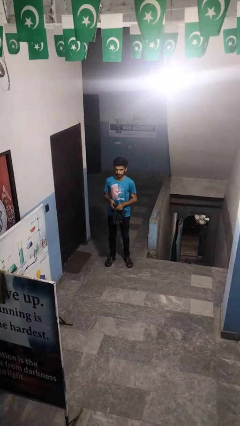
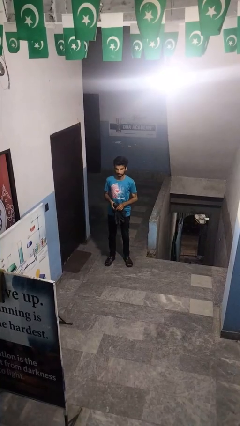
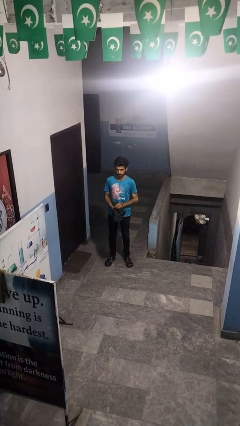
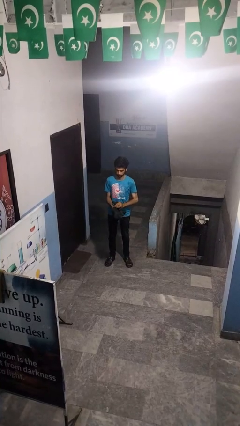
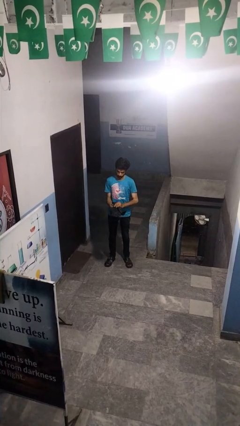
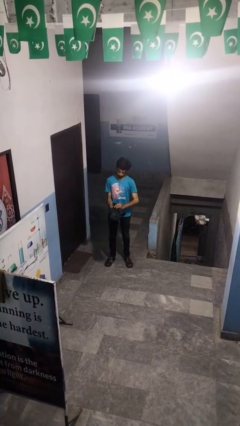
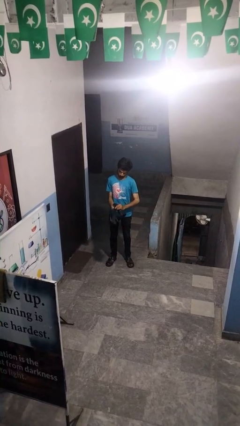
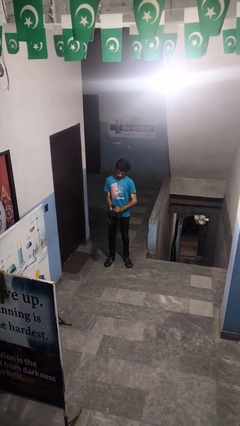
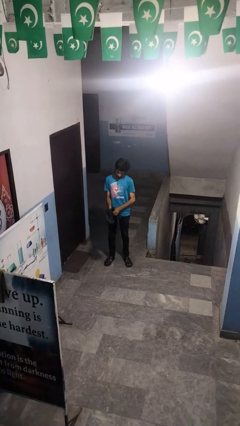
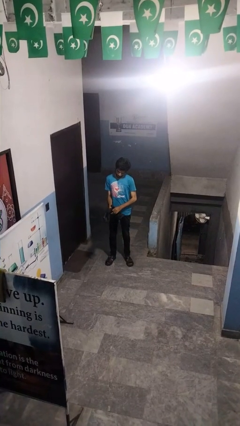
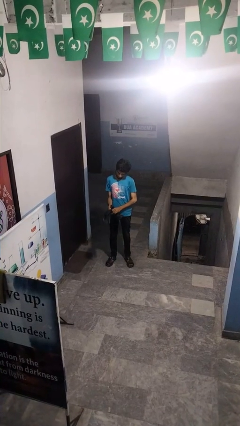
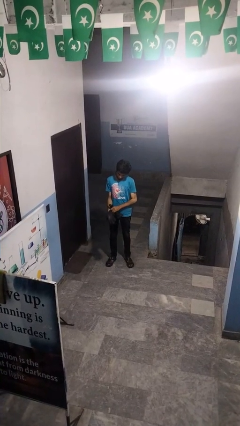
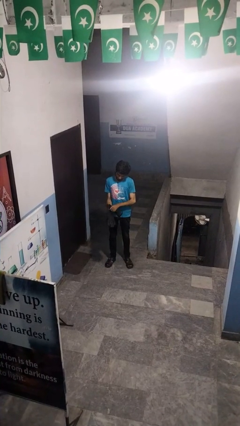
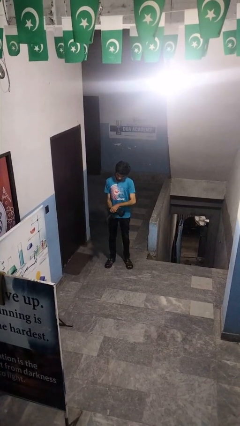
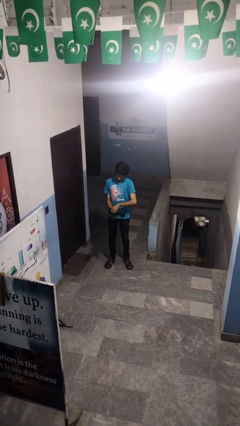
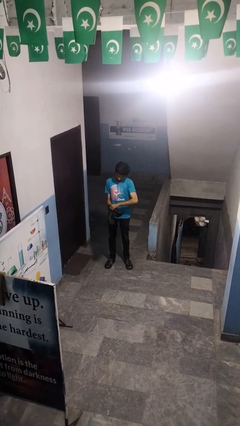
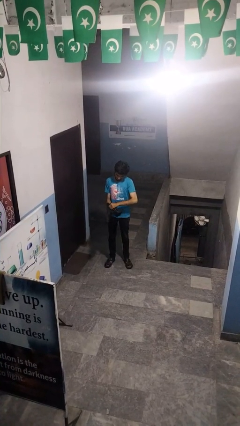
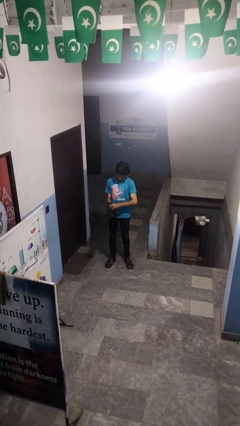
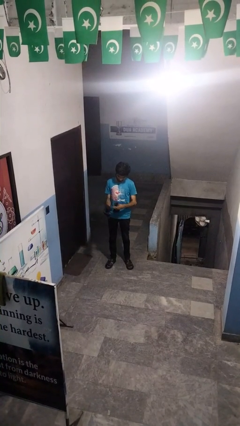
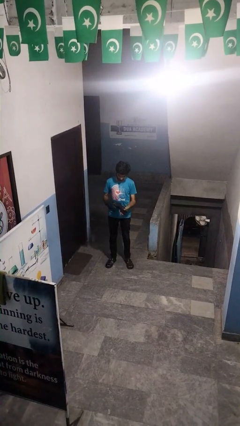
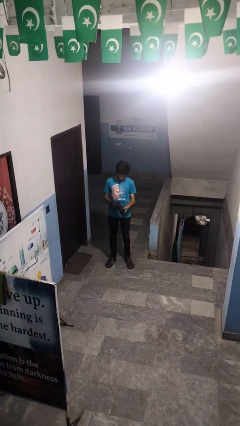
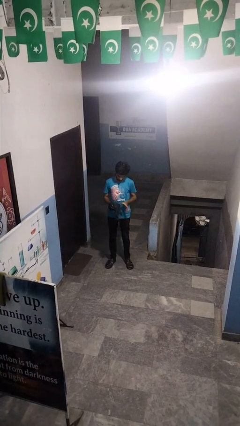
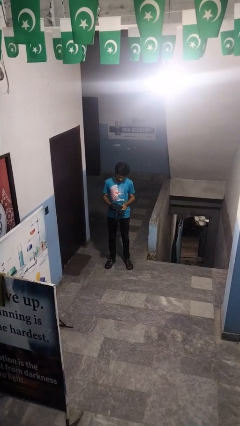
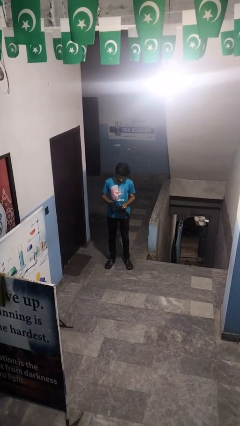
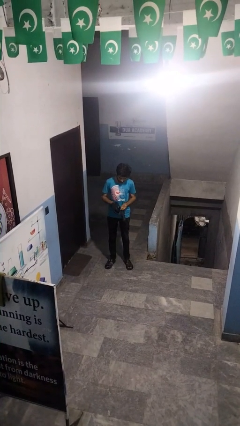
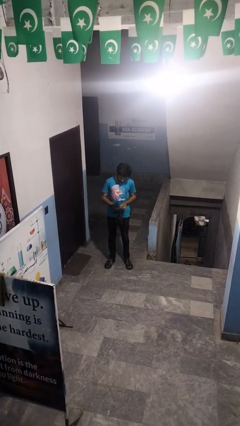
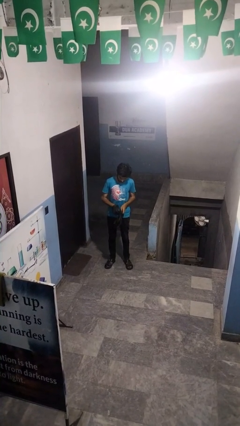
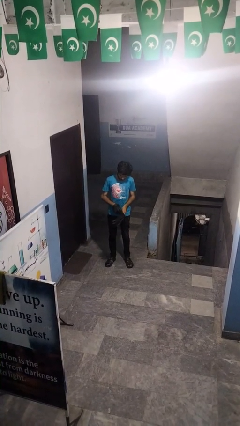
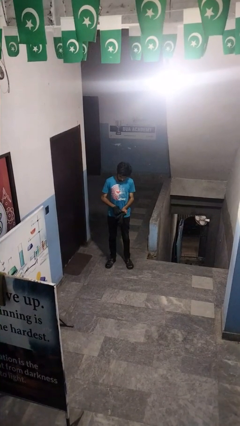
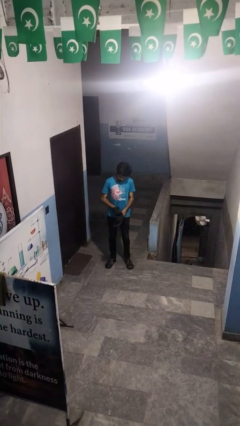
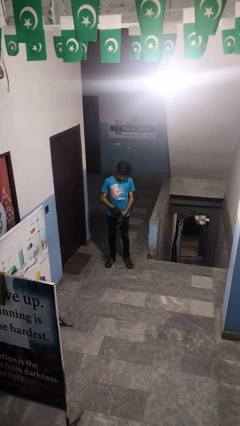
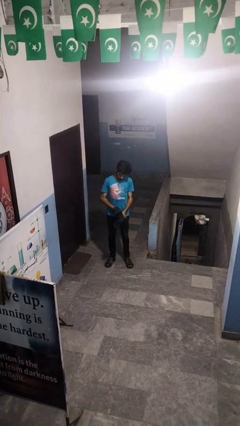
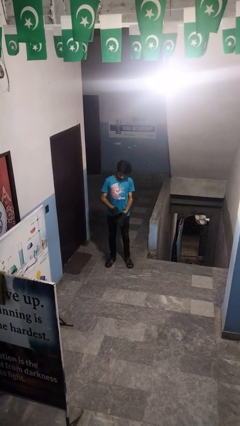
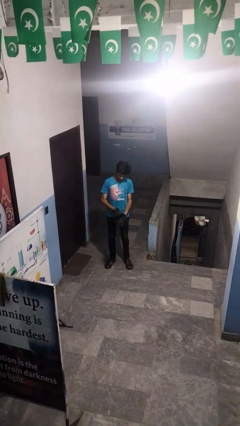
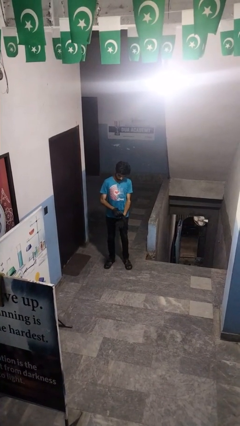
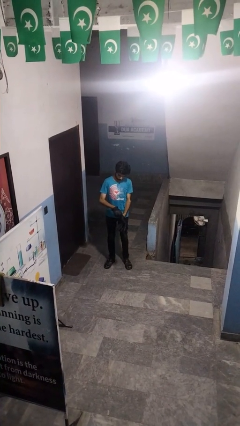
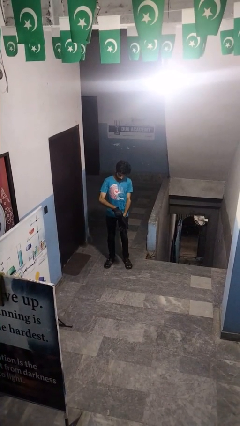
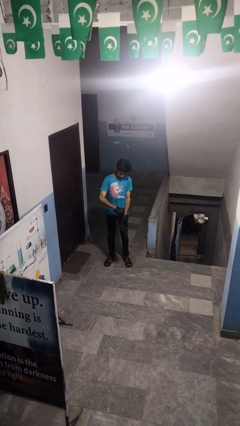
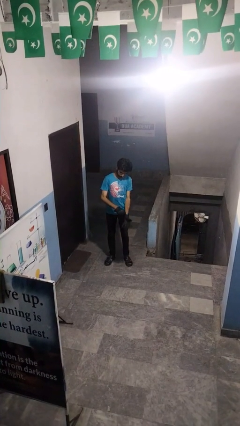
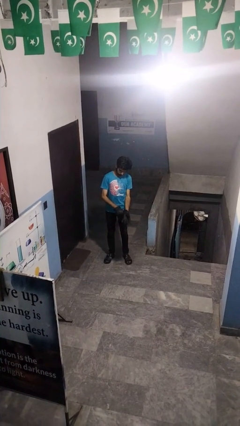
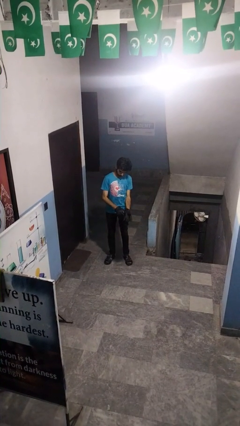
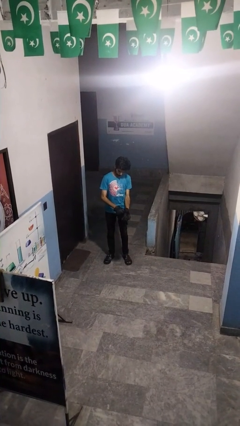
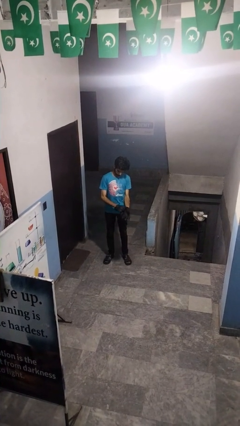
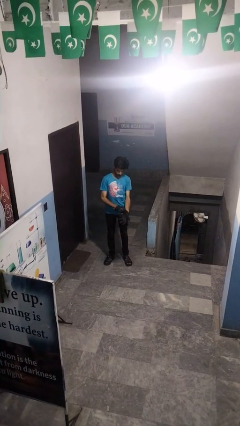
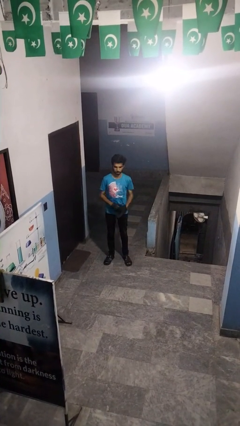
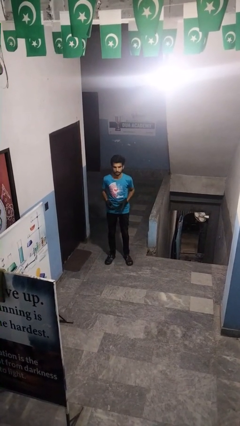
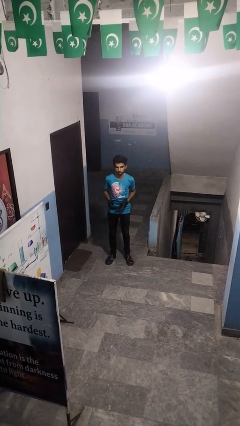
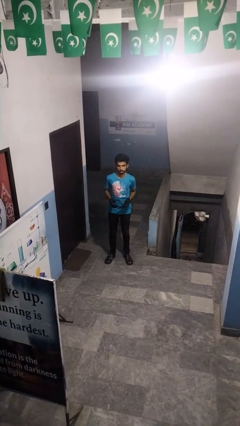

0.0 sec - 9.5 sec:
person puts on gloves

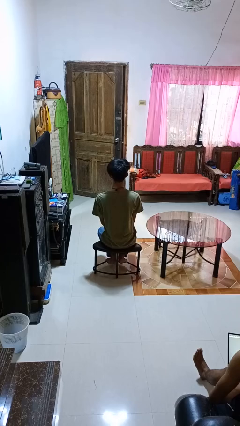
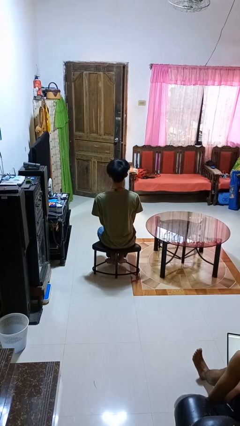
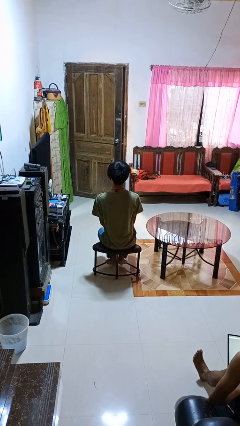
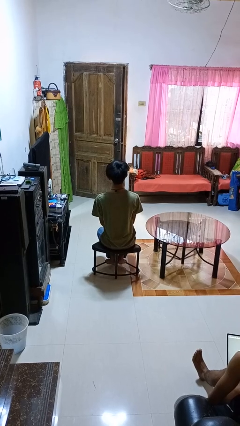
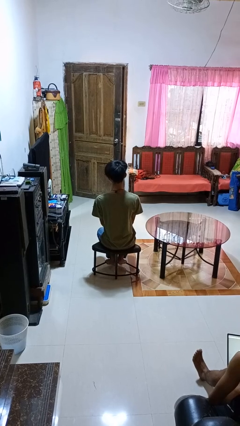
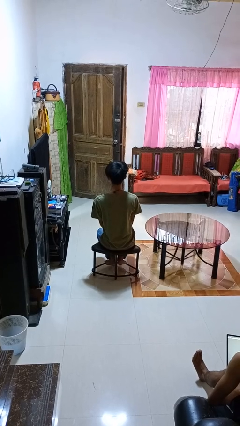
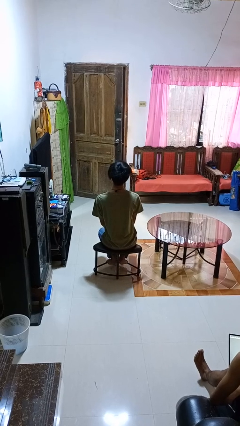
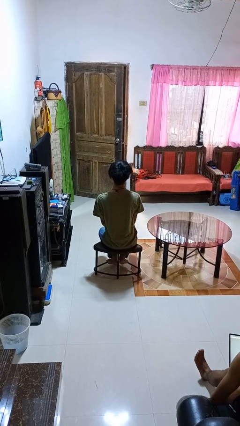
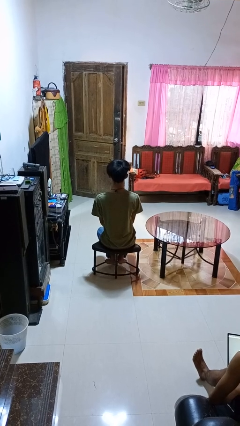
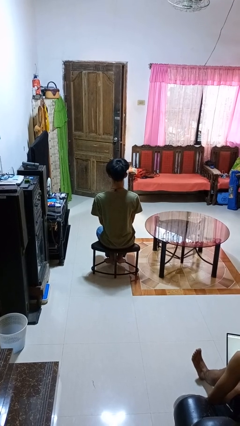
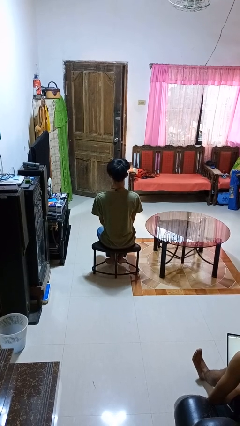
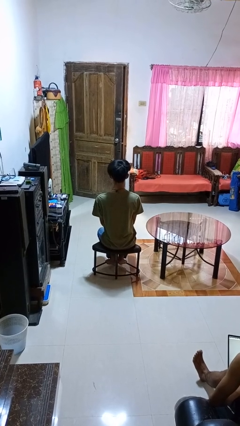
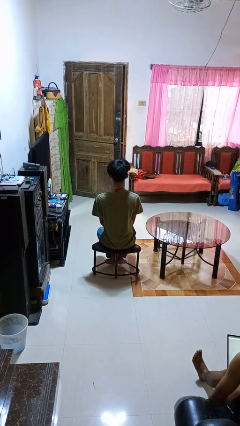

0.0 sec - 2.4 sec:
person nods head

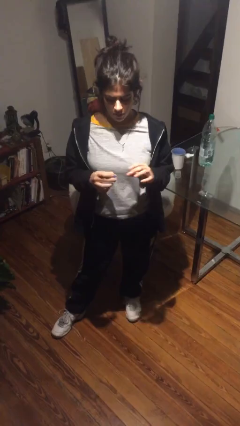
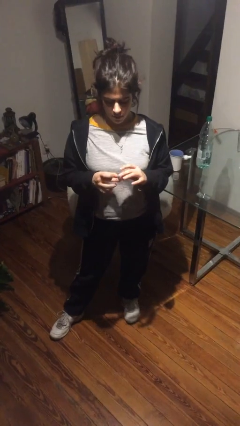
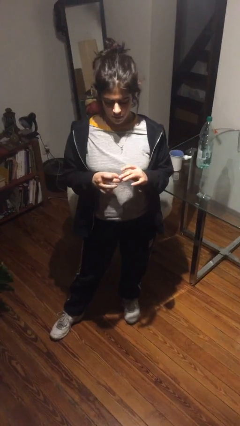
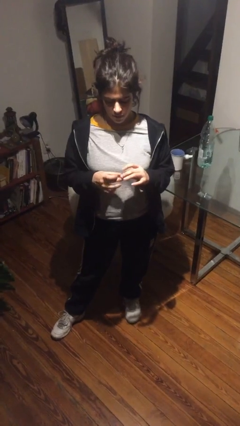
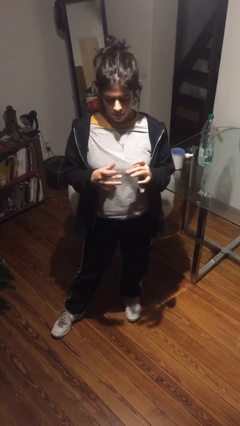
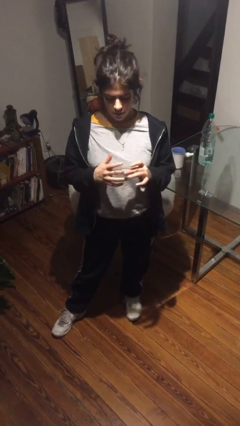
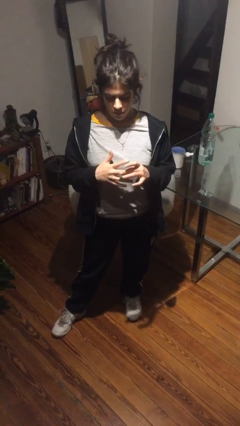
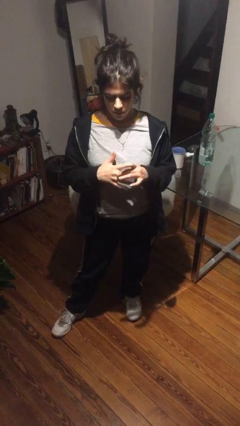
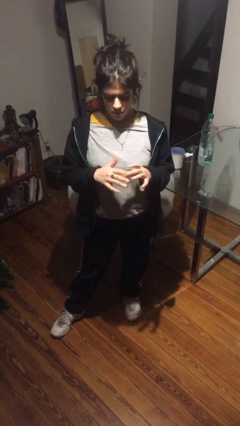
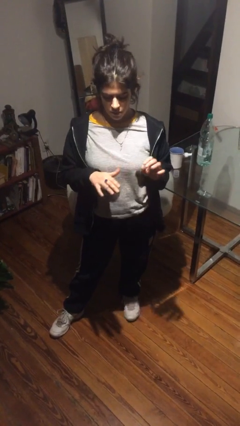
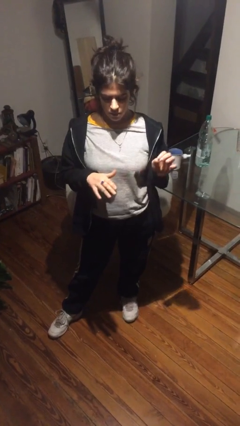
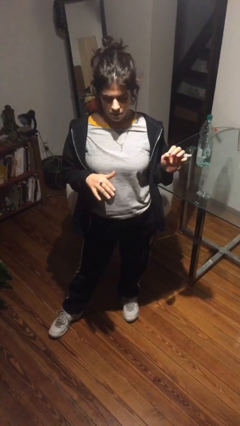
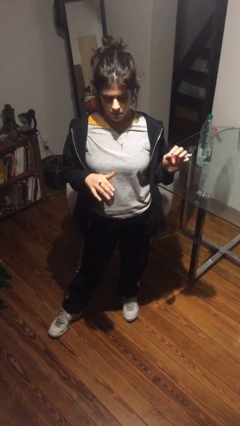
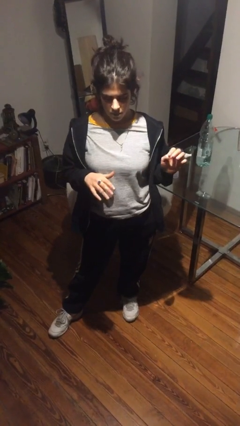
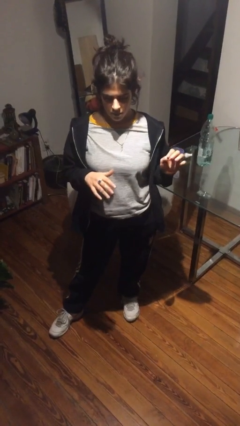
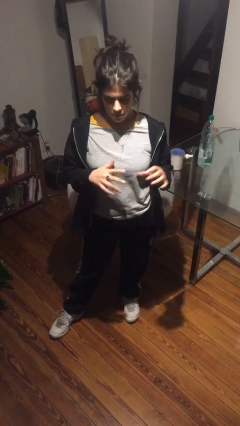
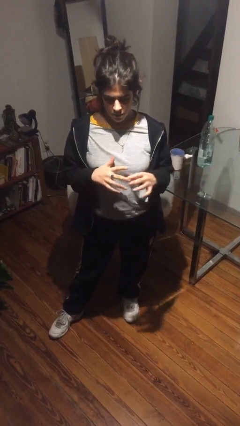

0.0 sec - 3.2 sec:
person puts on ring

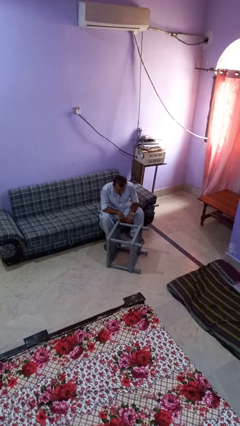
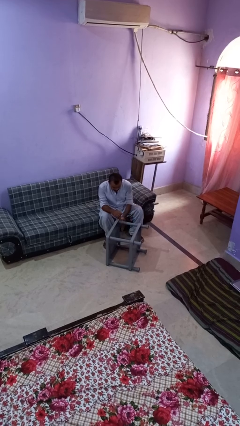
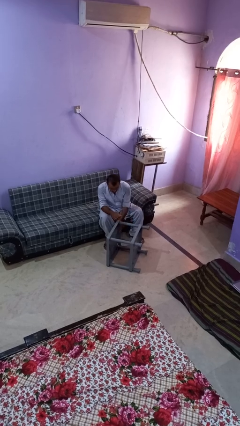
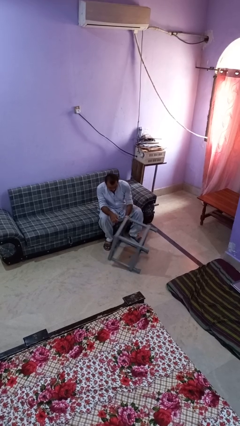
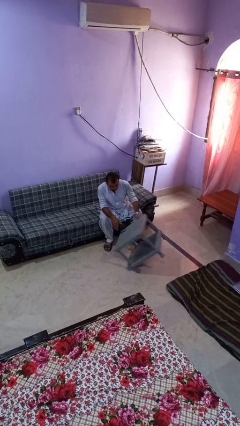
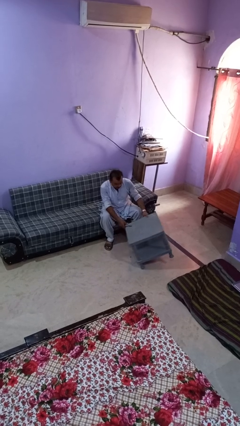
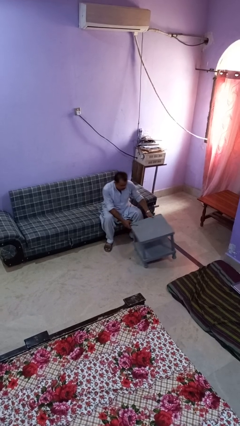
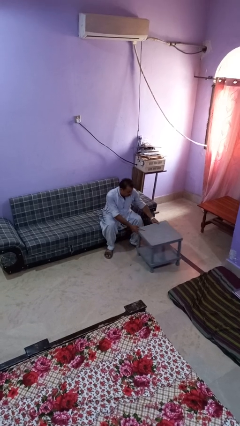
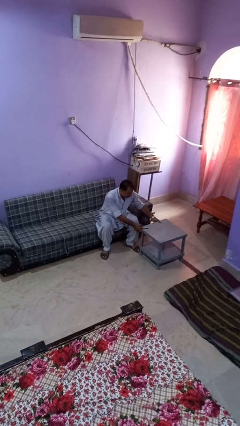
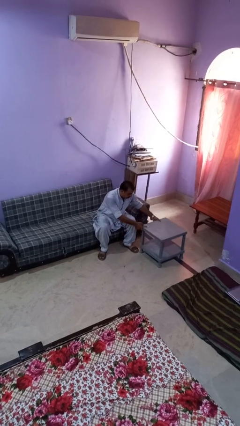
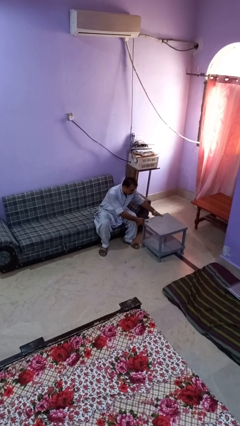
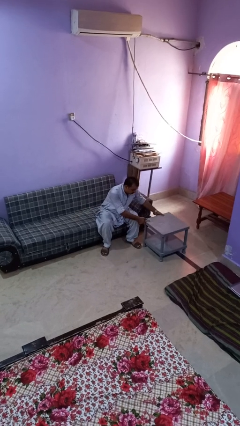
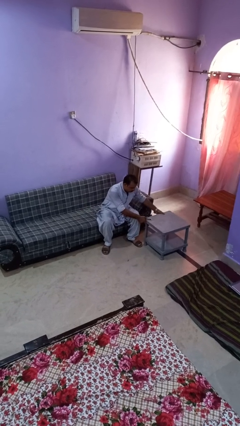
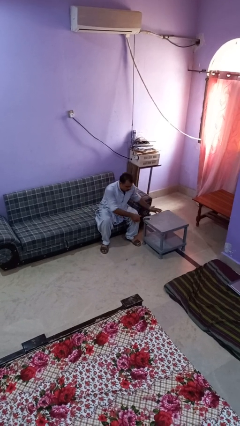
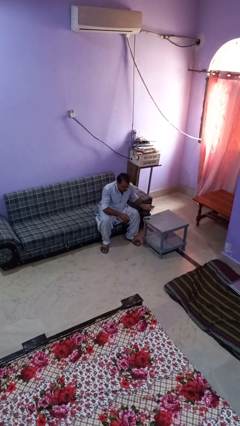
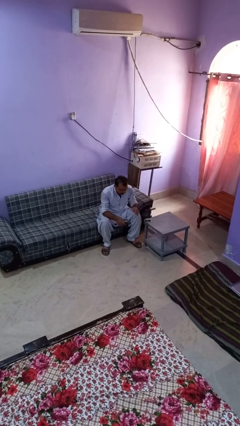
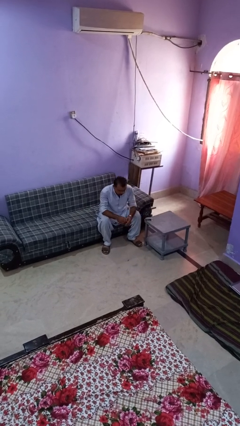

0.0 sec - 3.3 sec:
person sets upright furniture
